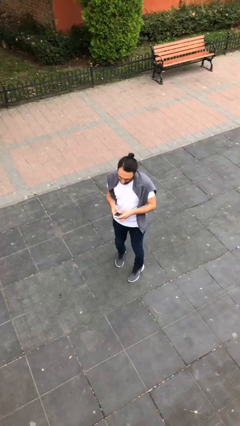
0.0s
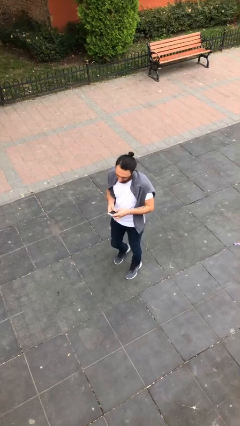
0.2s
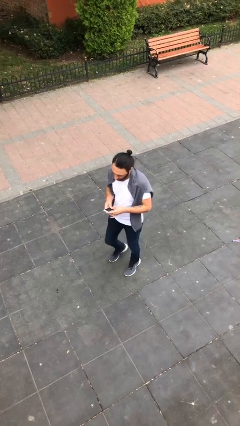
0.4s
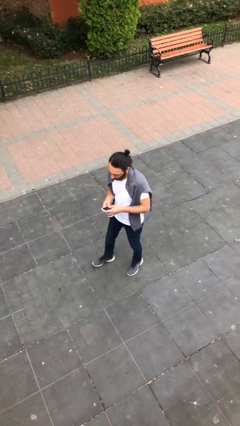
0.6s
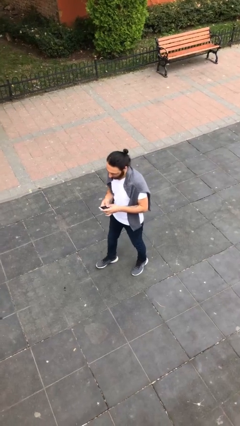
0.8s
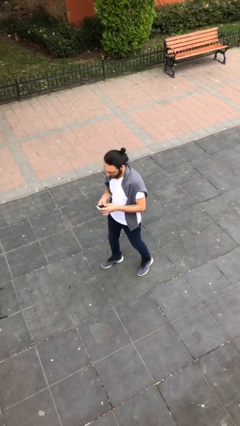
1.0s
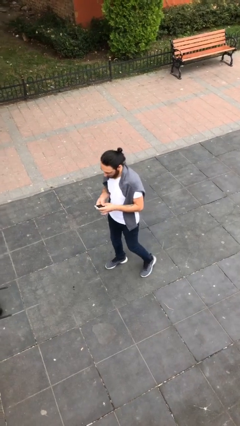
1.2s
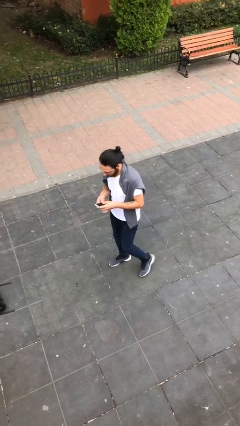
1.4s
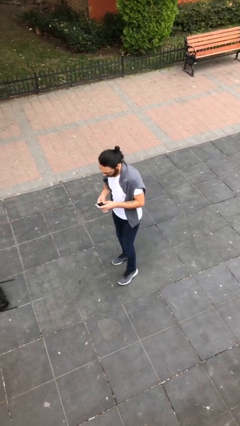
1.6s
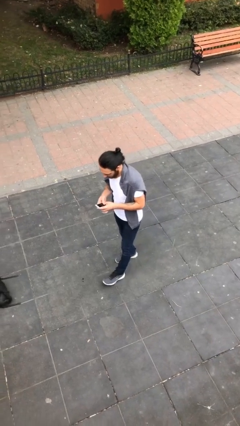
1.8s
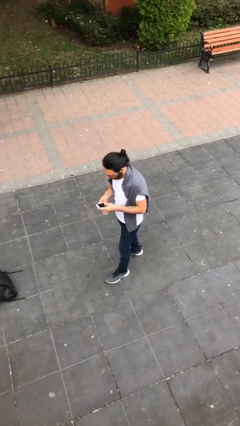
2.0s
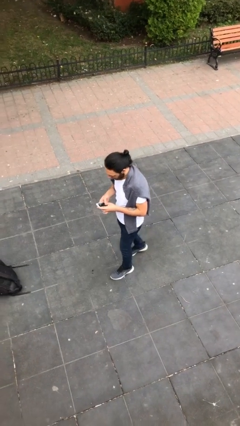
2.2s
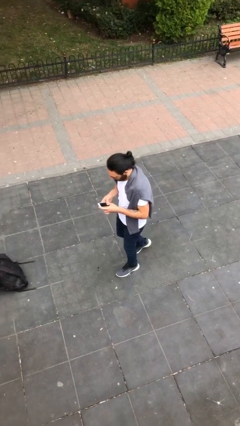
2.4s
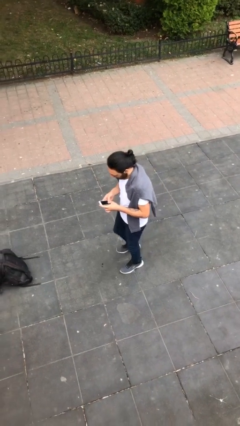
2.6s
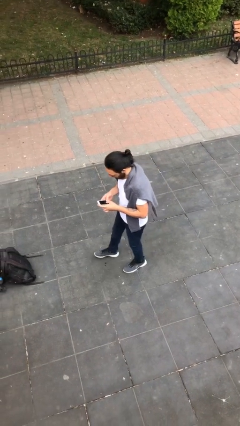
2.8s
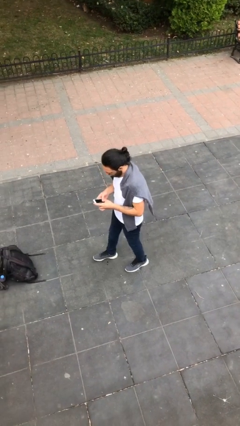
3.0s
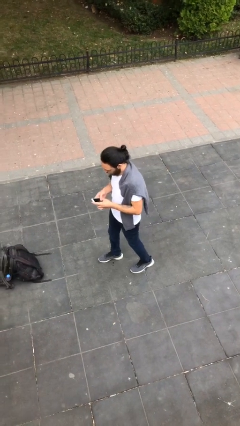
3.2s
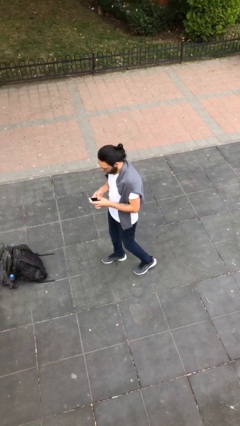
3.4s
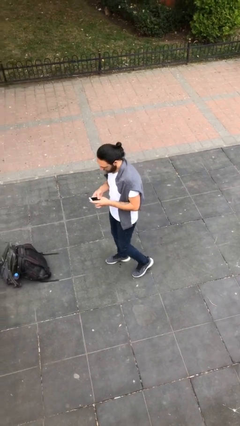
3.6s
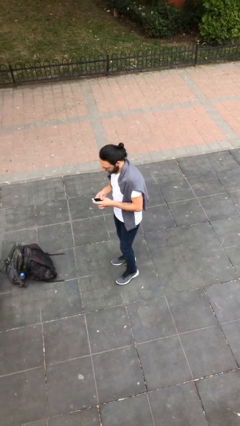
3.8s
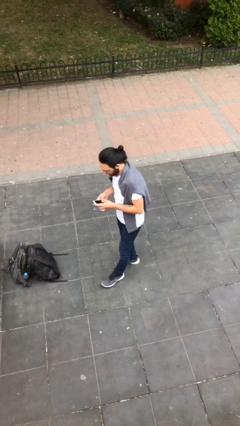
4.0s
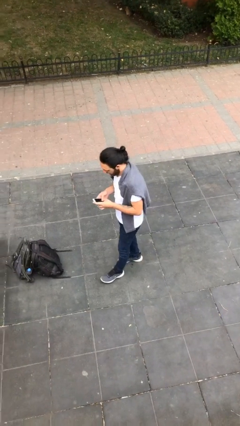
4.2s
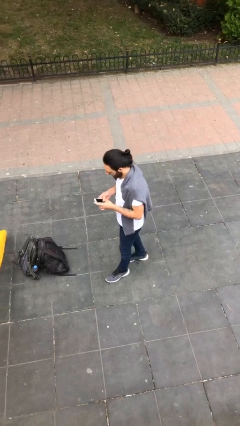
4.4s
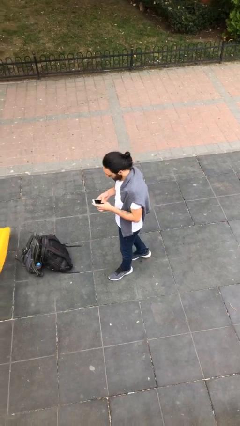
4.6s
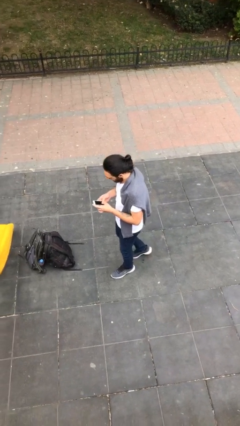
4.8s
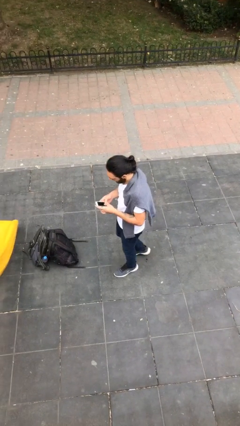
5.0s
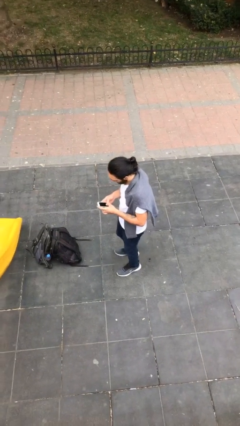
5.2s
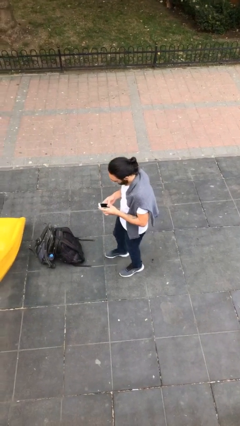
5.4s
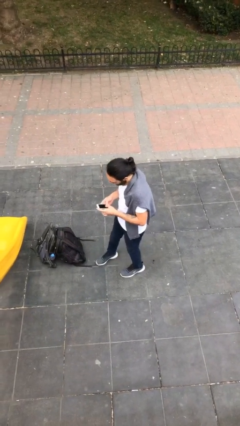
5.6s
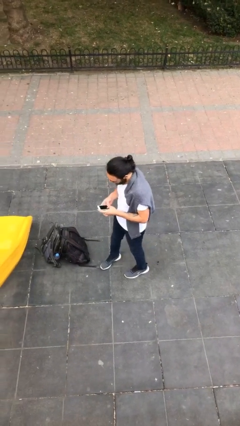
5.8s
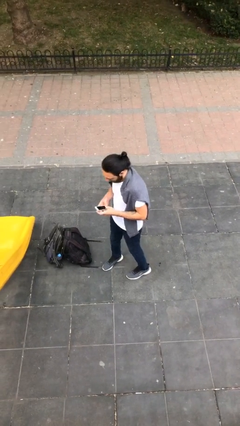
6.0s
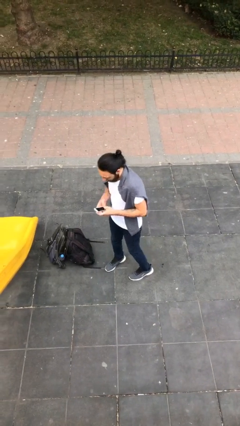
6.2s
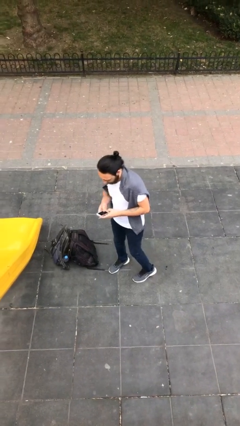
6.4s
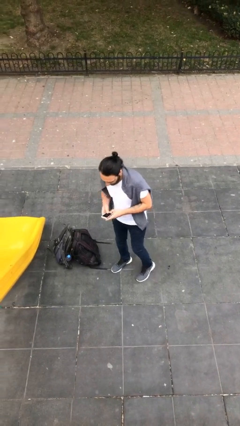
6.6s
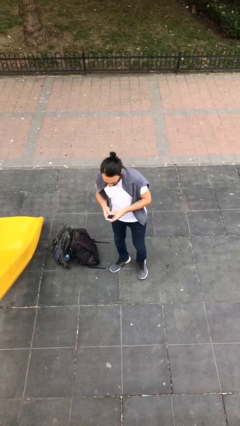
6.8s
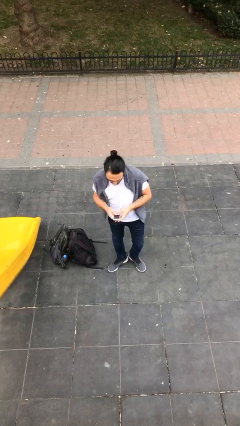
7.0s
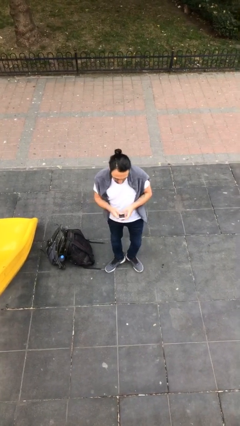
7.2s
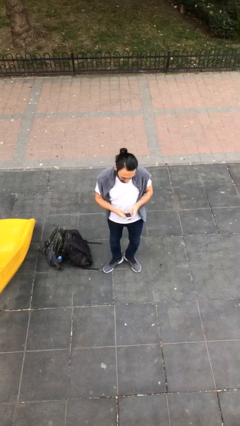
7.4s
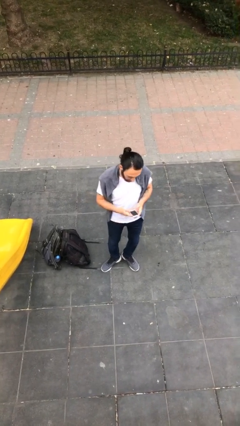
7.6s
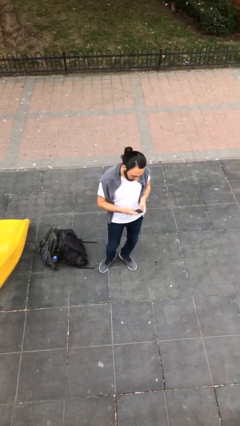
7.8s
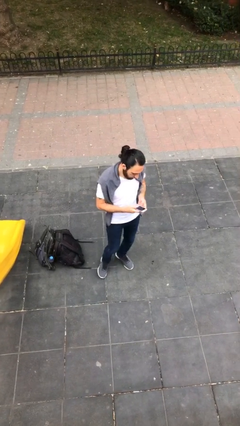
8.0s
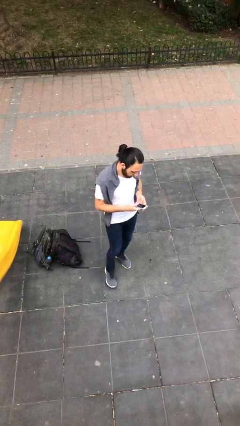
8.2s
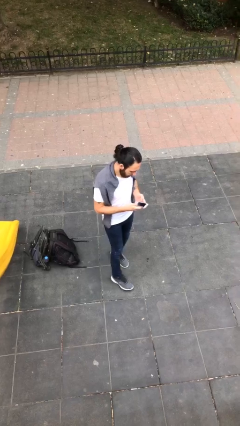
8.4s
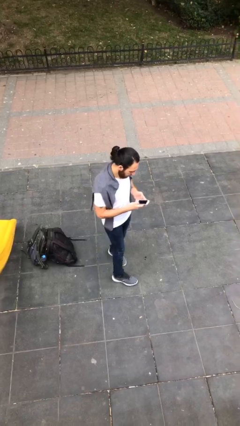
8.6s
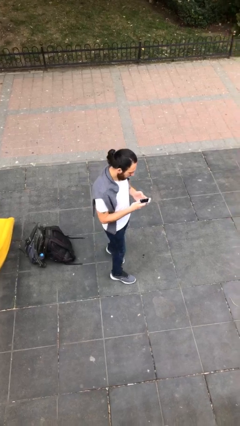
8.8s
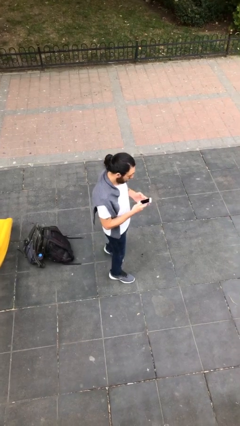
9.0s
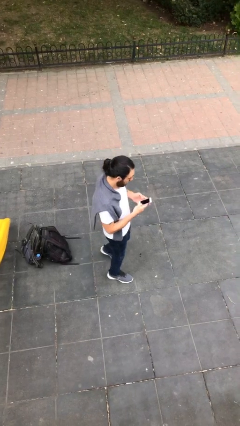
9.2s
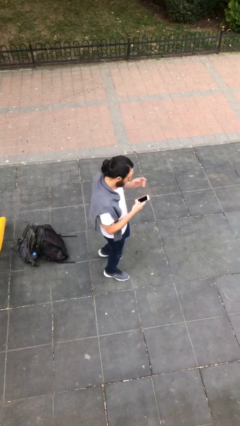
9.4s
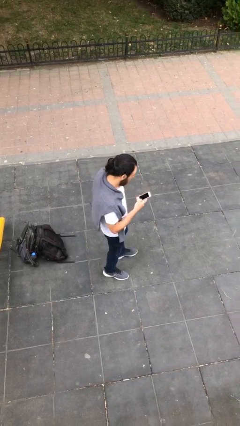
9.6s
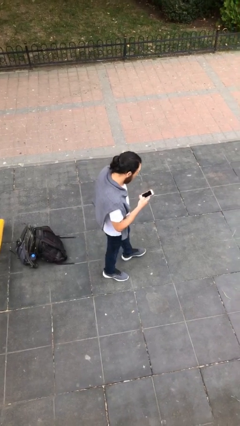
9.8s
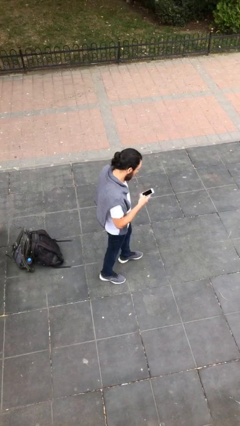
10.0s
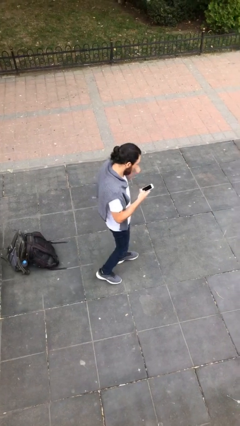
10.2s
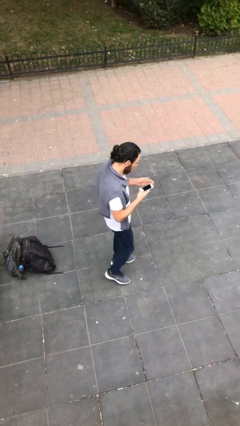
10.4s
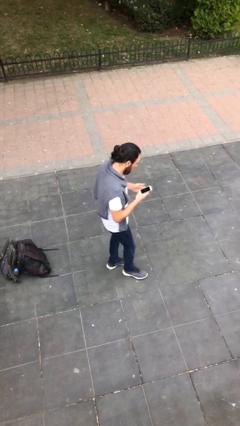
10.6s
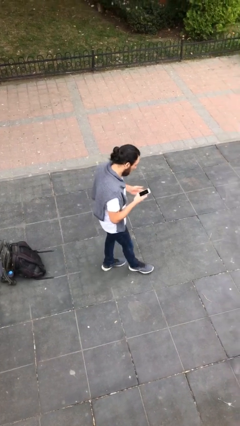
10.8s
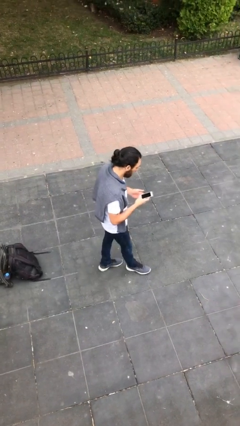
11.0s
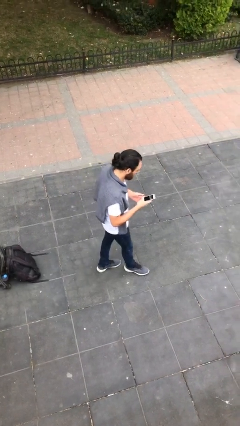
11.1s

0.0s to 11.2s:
person texts on phone

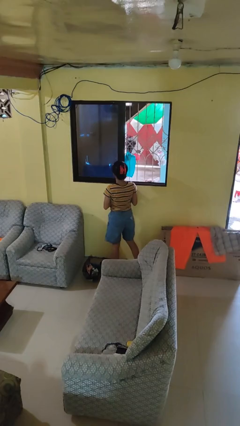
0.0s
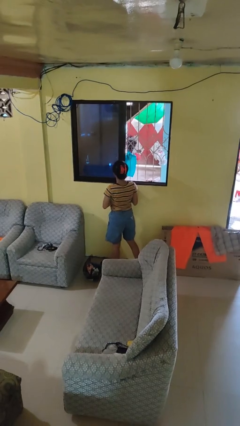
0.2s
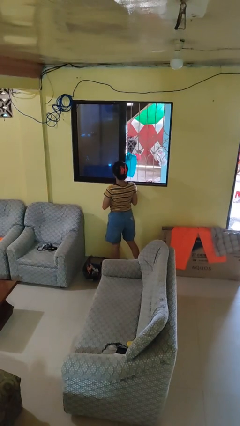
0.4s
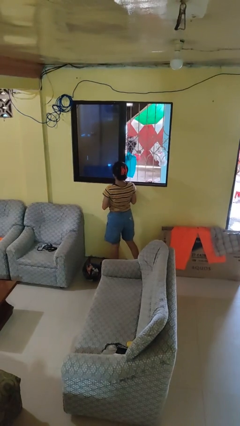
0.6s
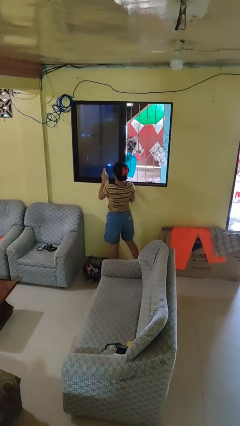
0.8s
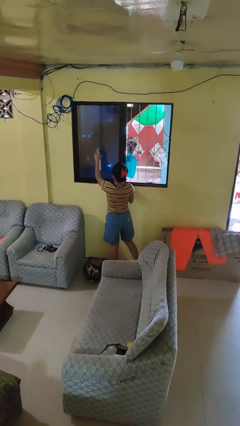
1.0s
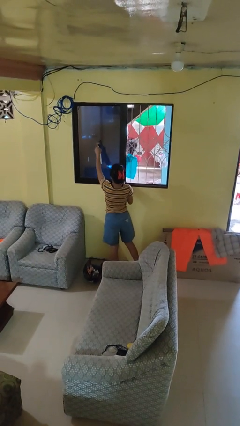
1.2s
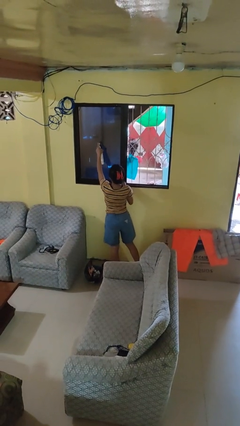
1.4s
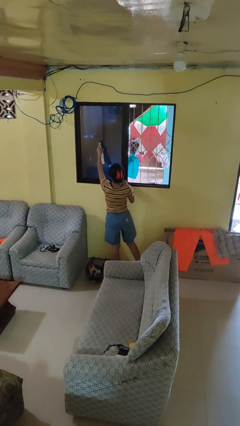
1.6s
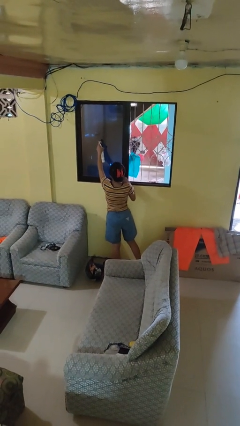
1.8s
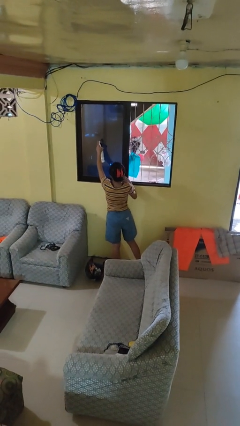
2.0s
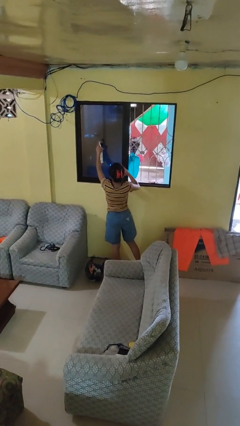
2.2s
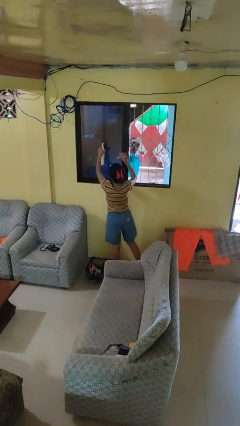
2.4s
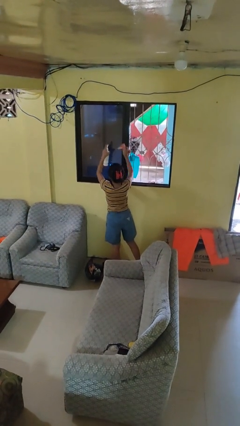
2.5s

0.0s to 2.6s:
person sprays from bottle

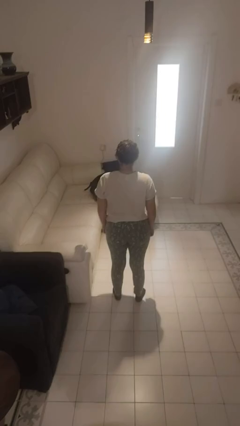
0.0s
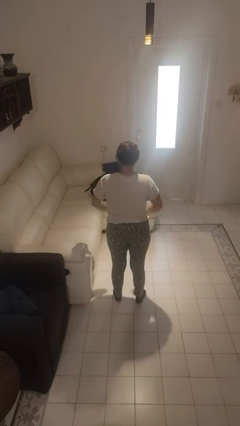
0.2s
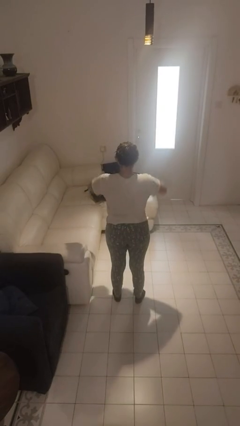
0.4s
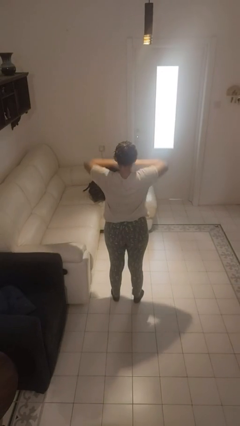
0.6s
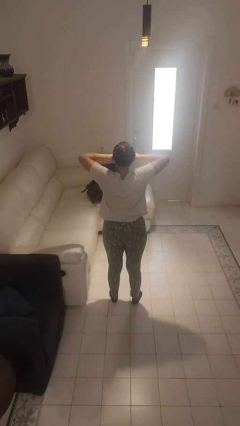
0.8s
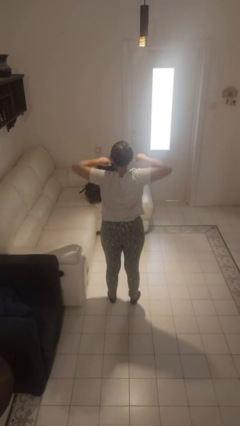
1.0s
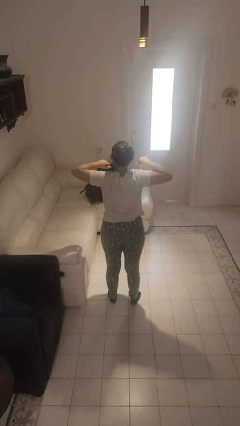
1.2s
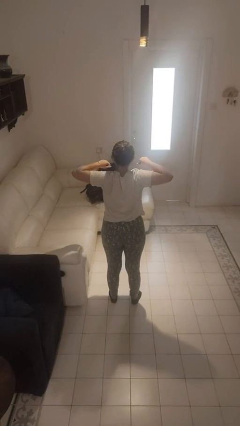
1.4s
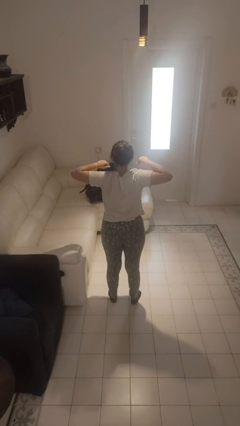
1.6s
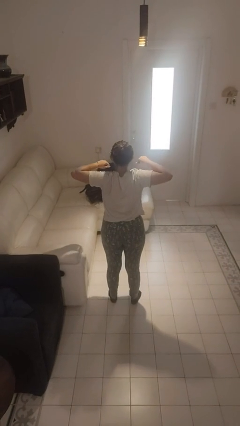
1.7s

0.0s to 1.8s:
person stretches back

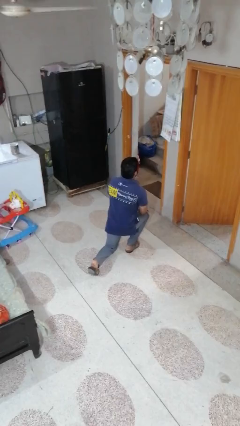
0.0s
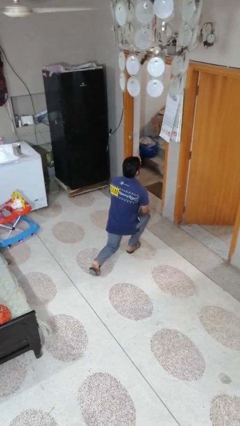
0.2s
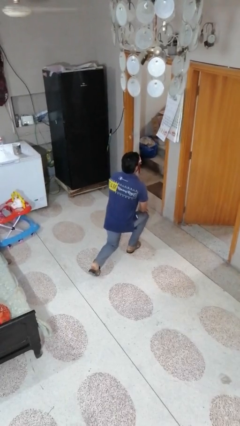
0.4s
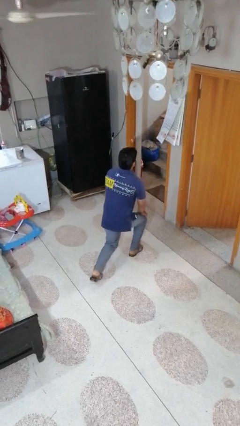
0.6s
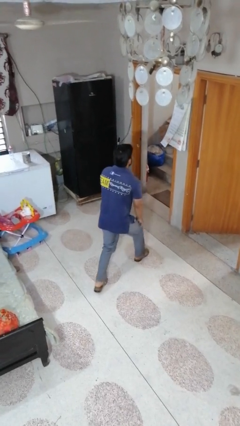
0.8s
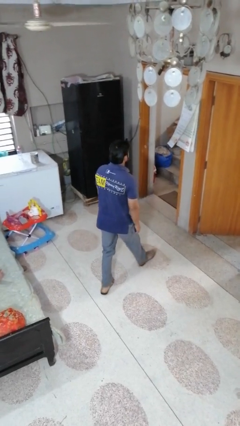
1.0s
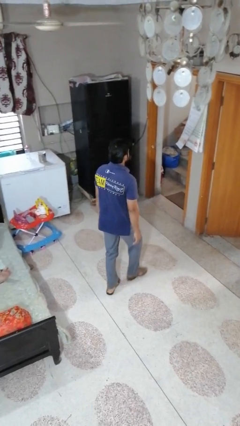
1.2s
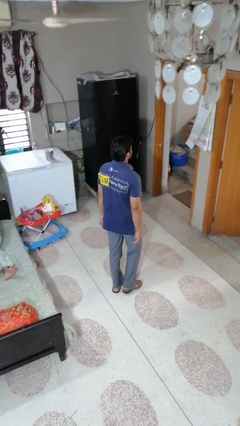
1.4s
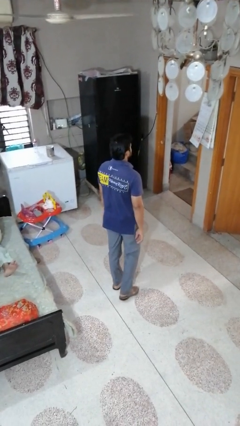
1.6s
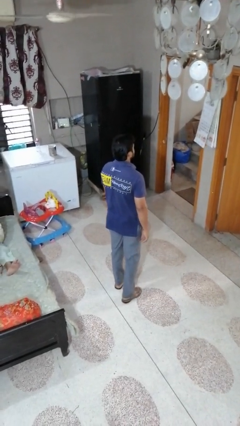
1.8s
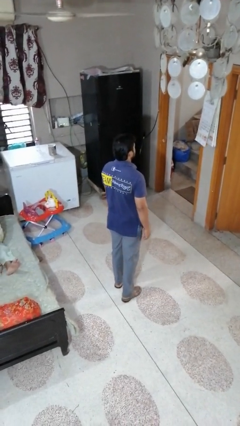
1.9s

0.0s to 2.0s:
person stands up from floor
